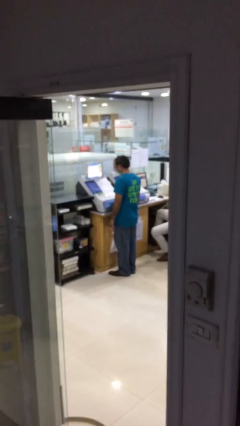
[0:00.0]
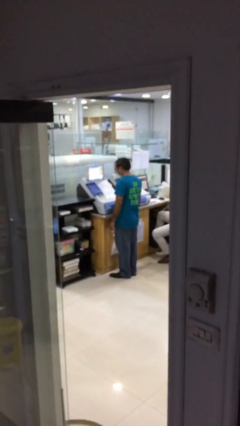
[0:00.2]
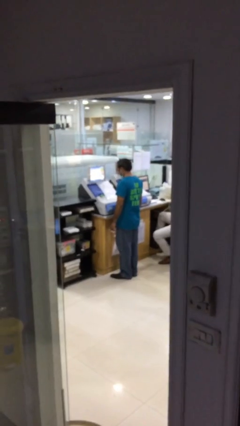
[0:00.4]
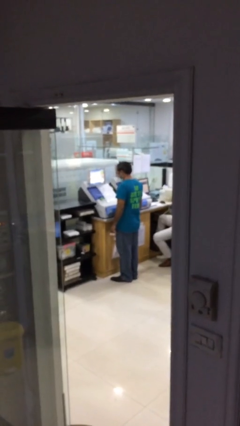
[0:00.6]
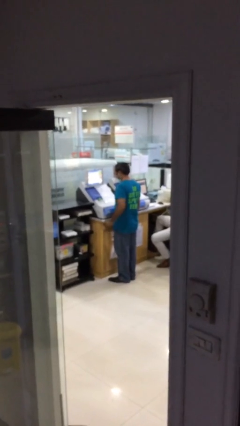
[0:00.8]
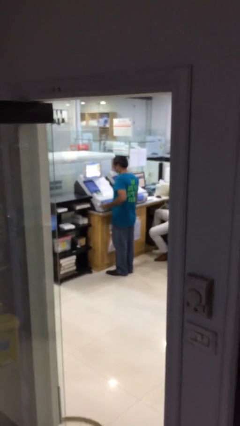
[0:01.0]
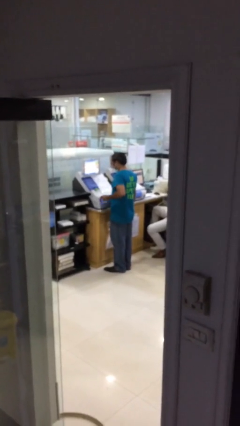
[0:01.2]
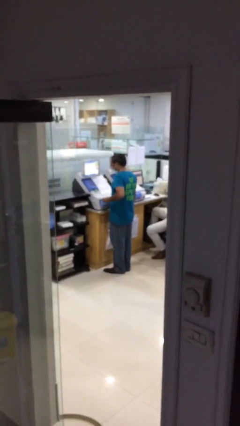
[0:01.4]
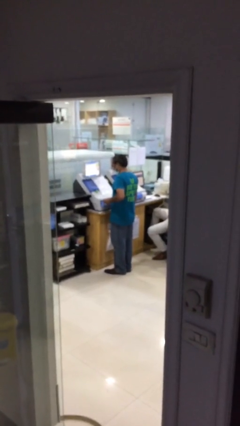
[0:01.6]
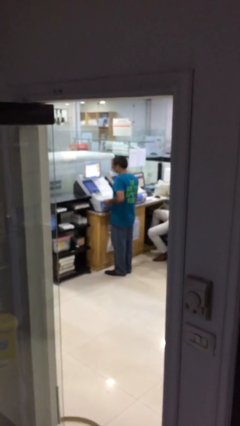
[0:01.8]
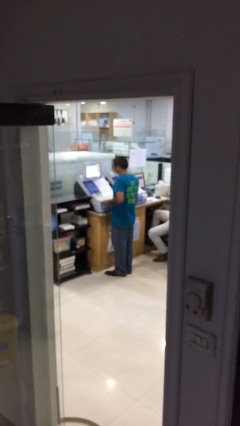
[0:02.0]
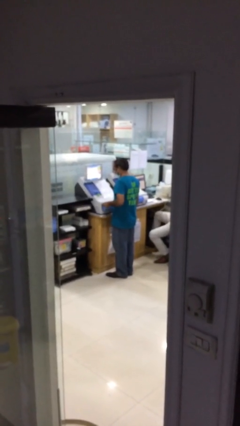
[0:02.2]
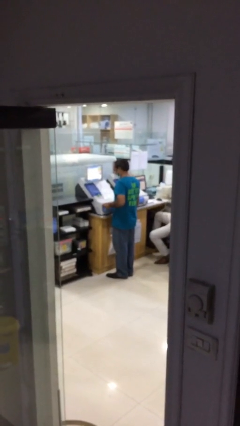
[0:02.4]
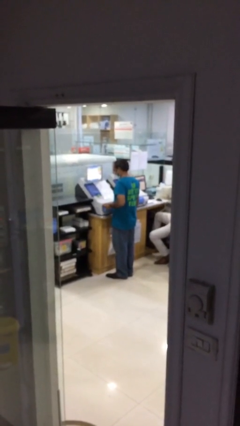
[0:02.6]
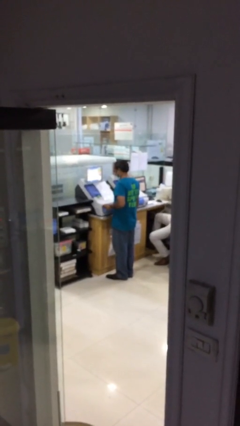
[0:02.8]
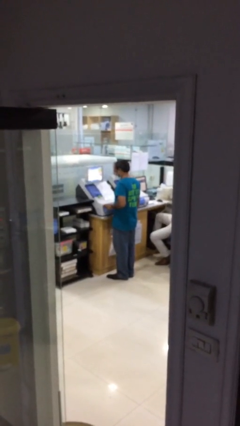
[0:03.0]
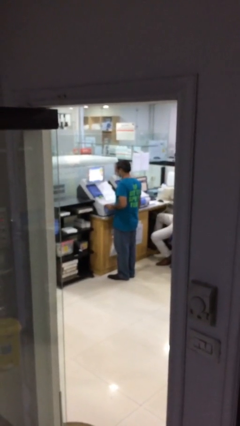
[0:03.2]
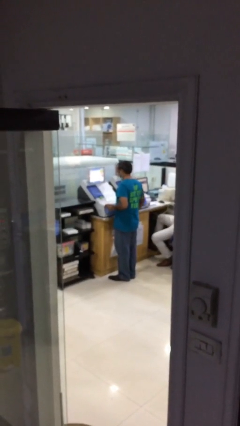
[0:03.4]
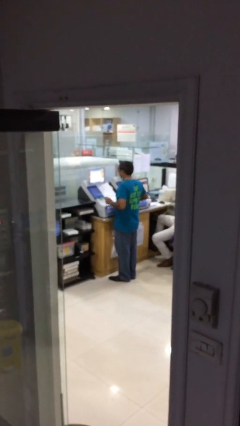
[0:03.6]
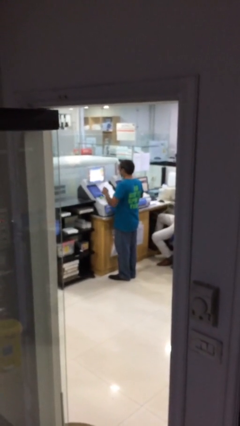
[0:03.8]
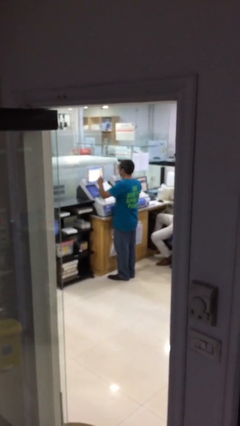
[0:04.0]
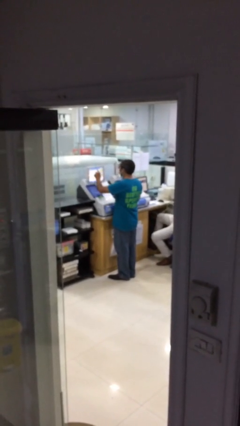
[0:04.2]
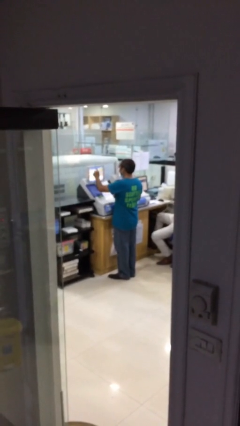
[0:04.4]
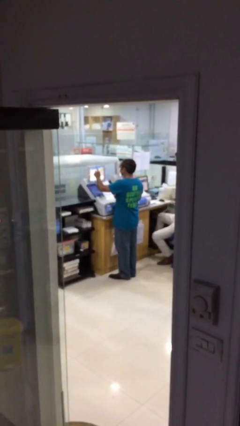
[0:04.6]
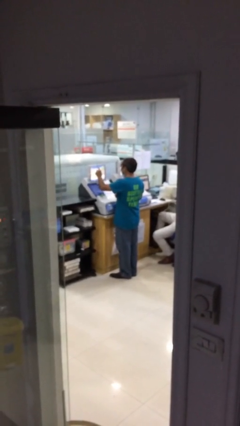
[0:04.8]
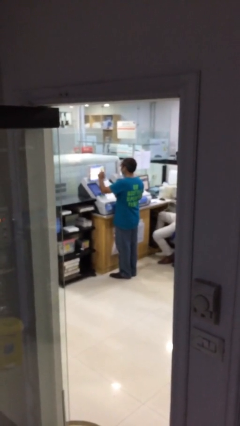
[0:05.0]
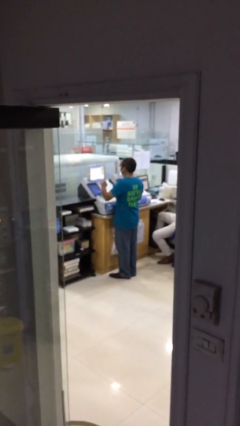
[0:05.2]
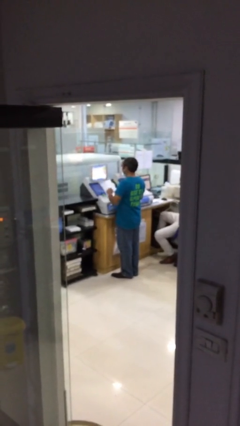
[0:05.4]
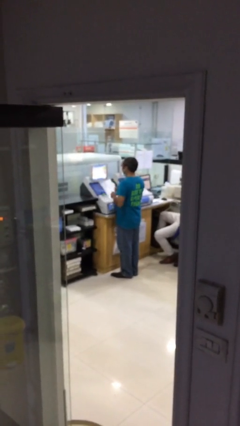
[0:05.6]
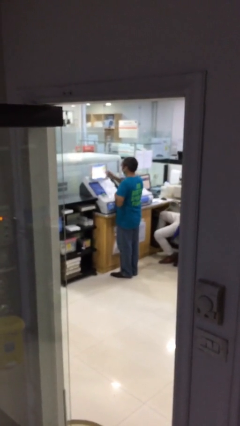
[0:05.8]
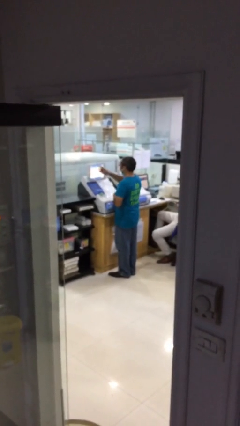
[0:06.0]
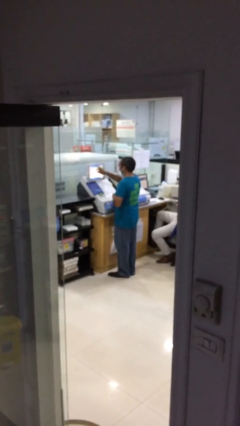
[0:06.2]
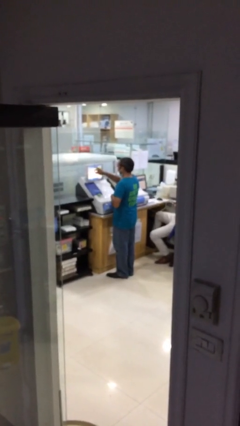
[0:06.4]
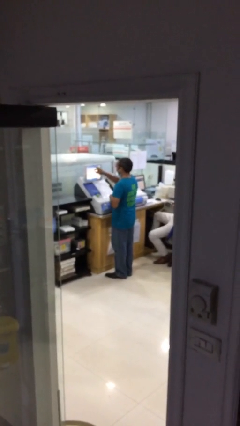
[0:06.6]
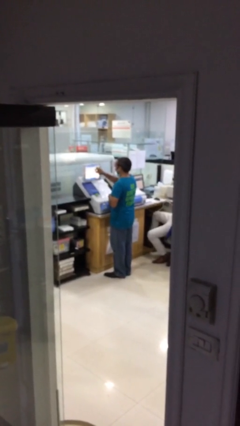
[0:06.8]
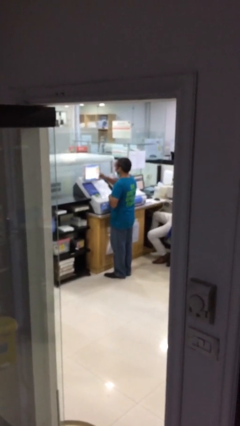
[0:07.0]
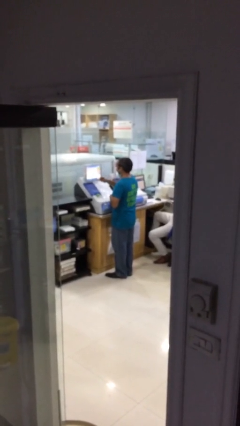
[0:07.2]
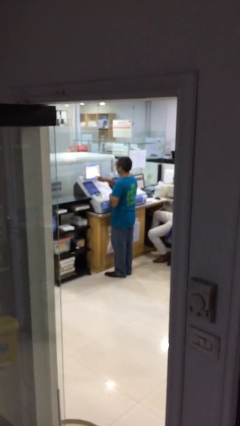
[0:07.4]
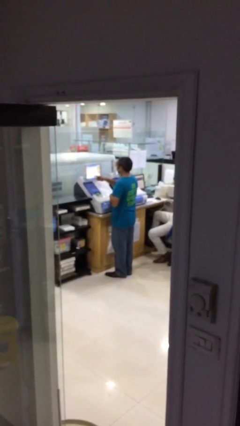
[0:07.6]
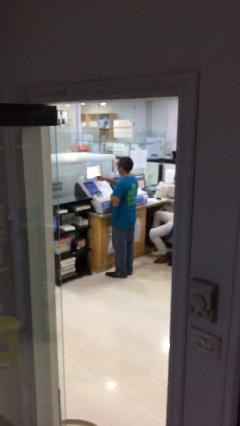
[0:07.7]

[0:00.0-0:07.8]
person purchases from machine

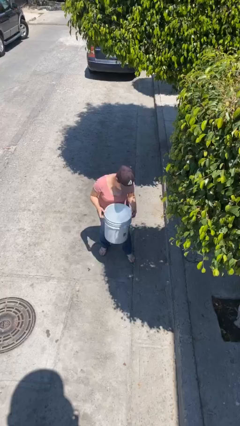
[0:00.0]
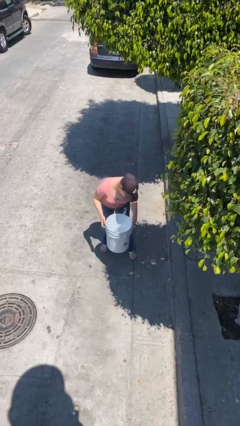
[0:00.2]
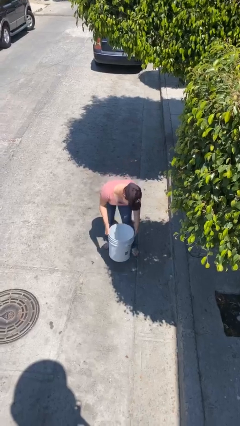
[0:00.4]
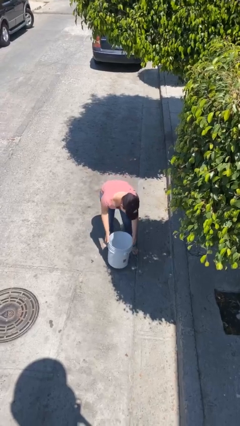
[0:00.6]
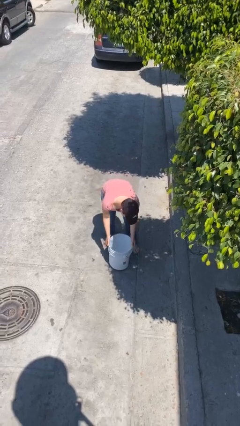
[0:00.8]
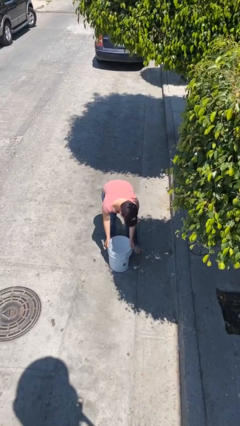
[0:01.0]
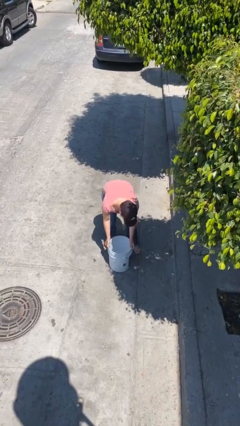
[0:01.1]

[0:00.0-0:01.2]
person puts down object on floor

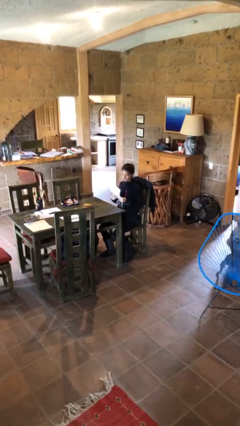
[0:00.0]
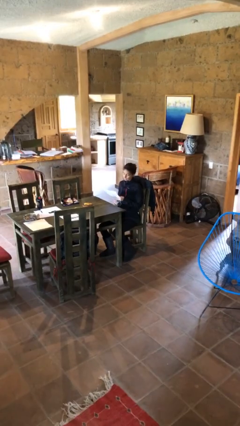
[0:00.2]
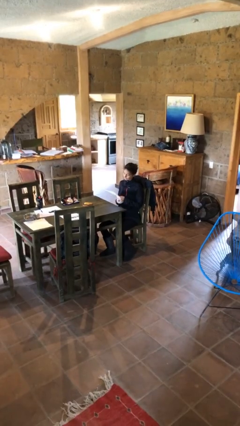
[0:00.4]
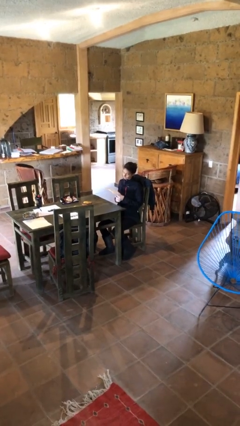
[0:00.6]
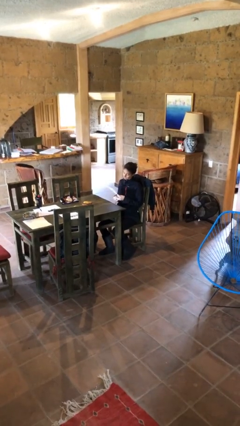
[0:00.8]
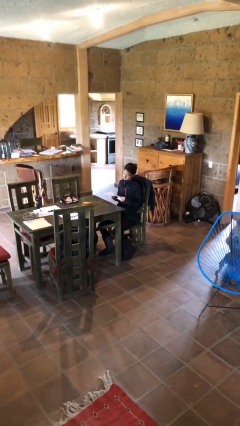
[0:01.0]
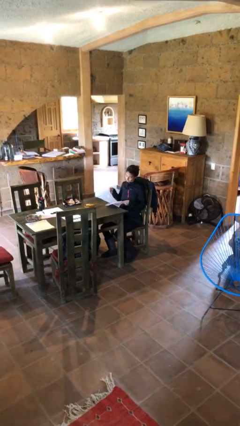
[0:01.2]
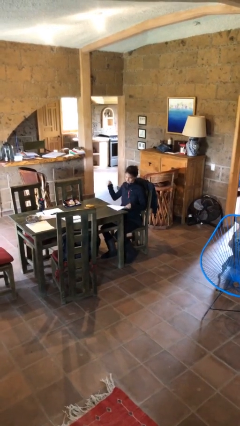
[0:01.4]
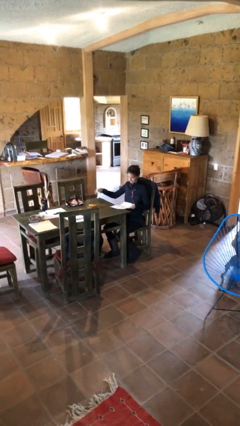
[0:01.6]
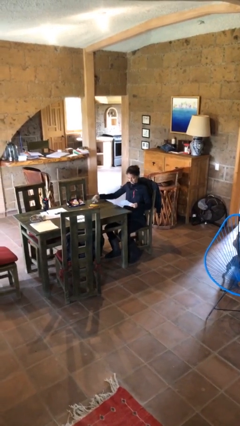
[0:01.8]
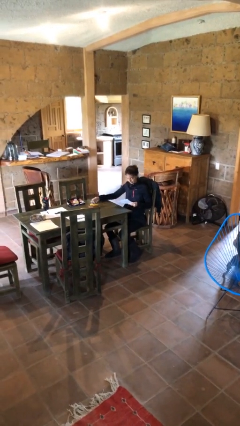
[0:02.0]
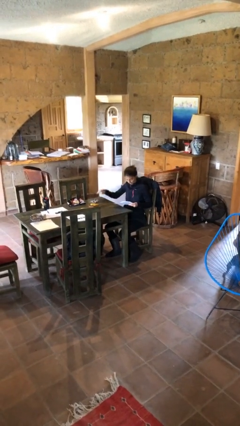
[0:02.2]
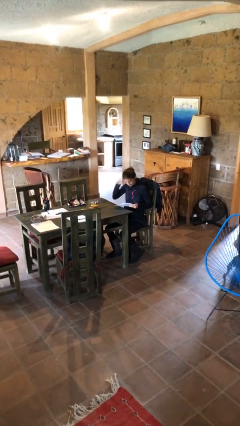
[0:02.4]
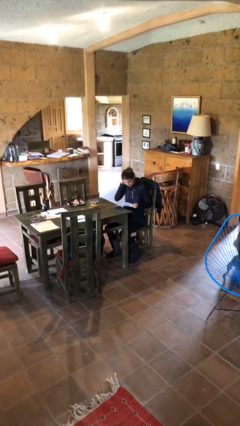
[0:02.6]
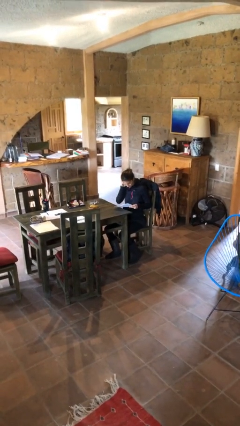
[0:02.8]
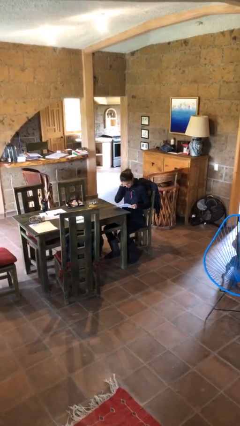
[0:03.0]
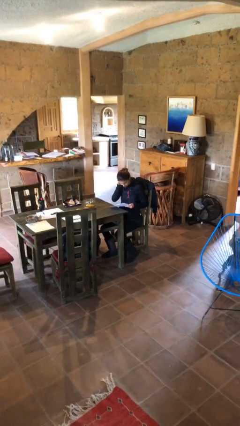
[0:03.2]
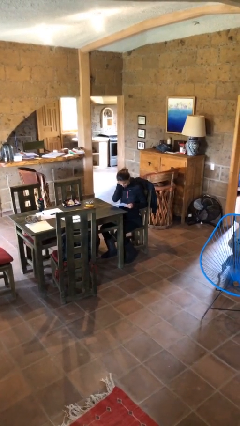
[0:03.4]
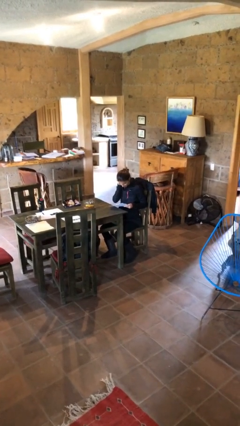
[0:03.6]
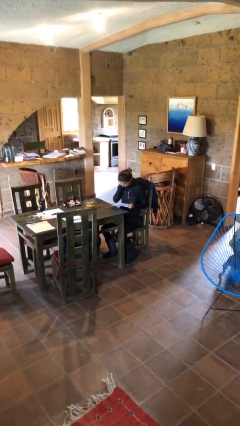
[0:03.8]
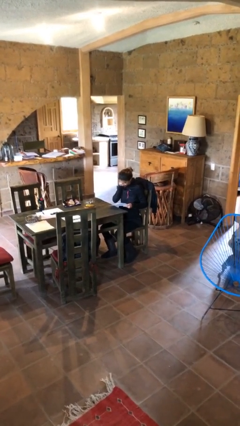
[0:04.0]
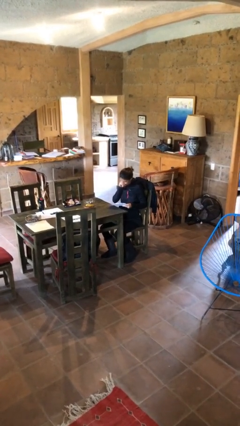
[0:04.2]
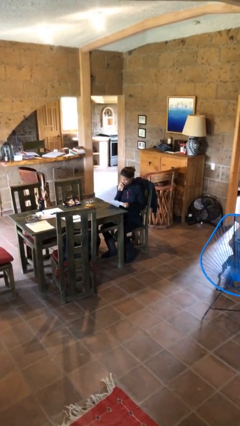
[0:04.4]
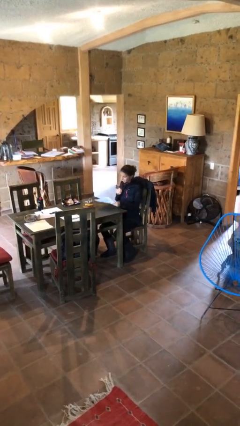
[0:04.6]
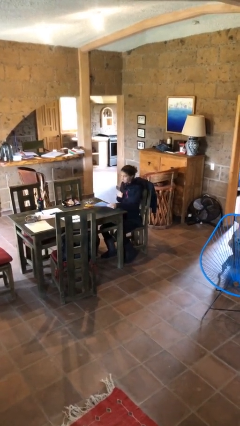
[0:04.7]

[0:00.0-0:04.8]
person reads document

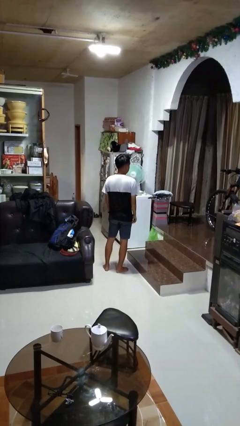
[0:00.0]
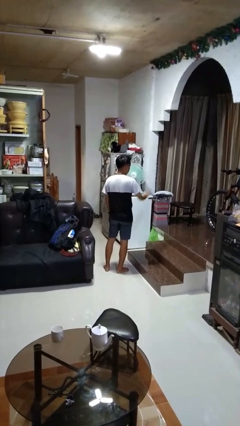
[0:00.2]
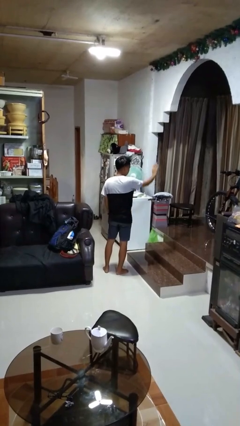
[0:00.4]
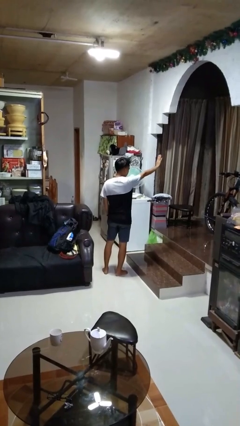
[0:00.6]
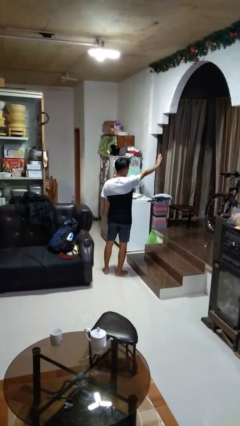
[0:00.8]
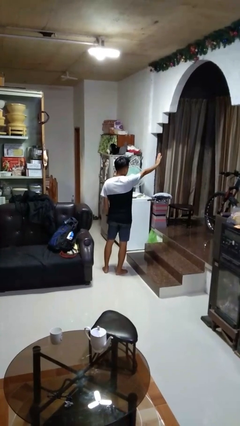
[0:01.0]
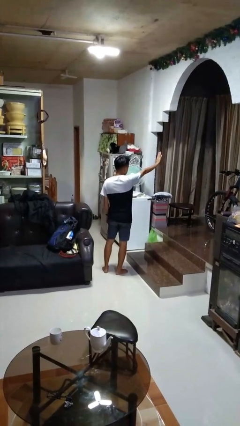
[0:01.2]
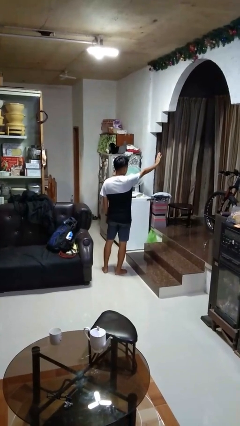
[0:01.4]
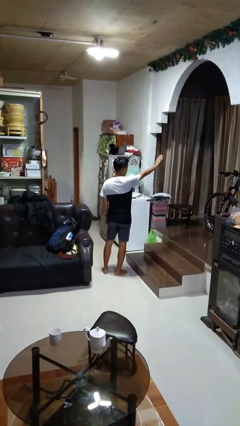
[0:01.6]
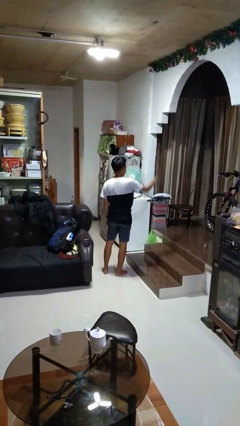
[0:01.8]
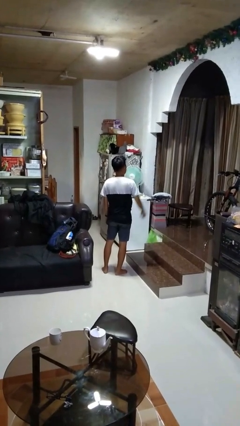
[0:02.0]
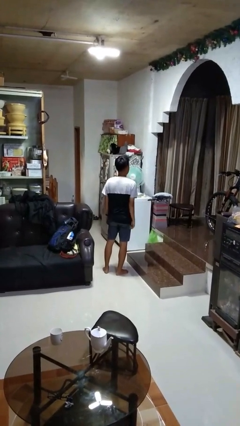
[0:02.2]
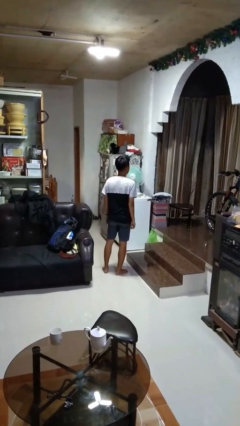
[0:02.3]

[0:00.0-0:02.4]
person gestures stop

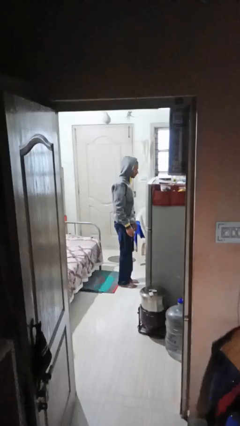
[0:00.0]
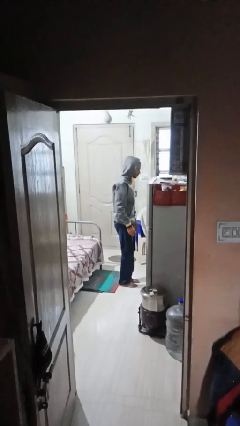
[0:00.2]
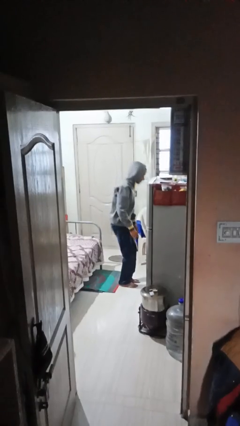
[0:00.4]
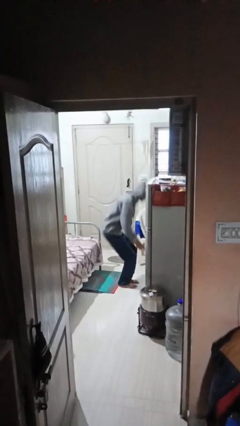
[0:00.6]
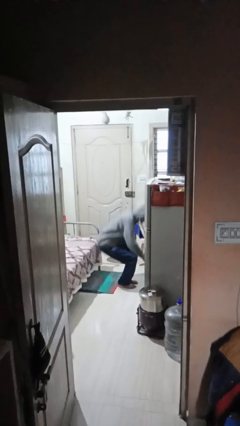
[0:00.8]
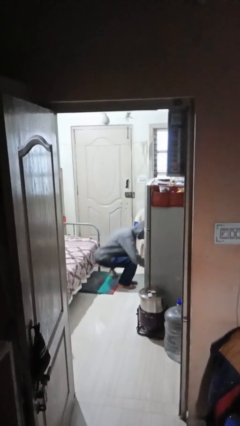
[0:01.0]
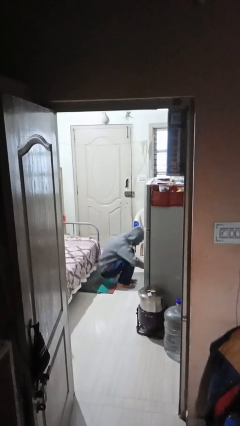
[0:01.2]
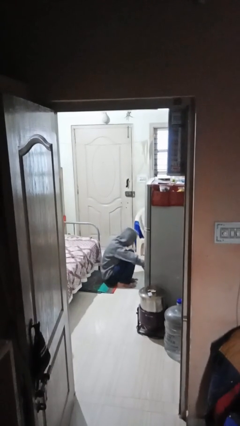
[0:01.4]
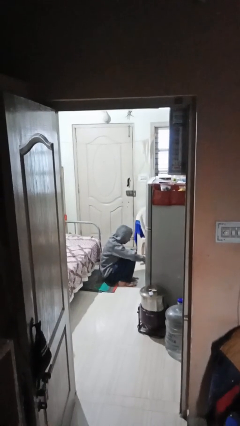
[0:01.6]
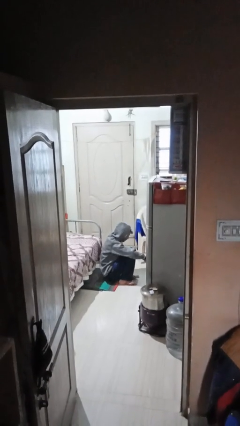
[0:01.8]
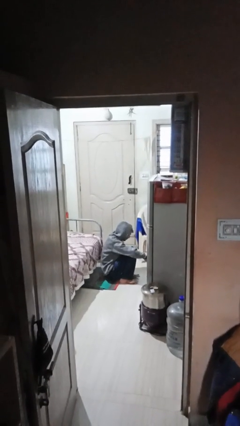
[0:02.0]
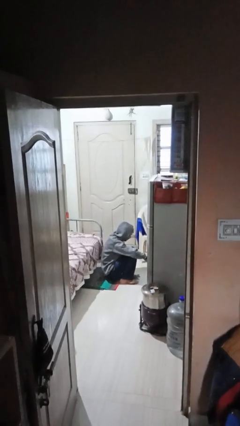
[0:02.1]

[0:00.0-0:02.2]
person sits down
